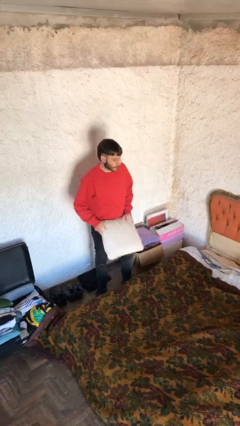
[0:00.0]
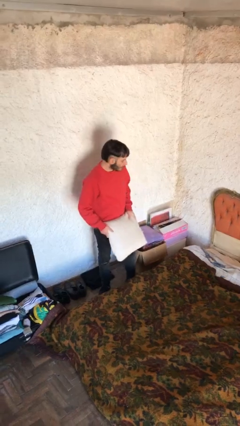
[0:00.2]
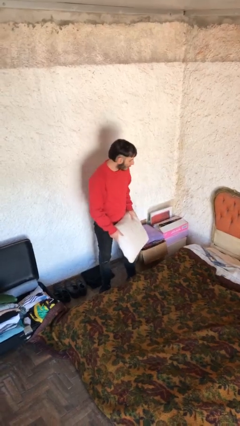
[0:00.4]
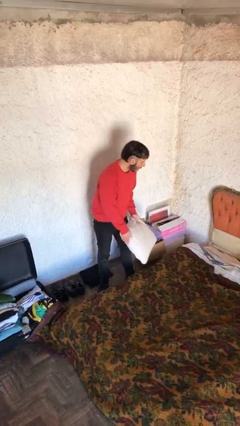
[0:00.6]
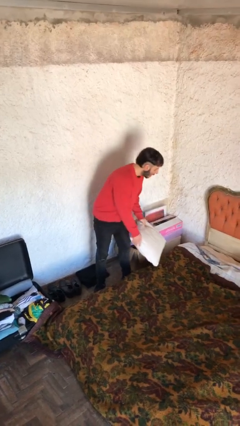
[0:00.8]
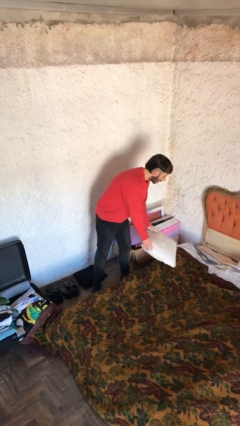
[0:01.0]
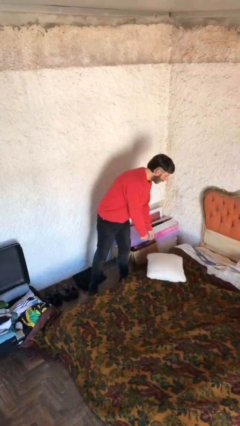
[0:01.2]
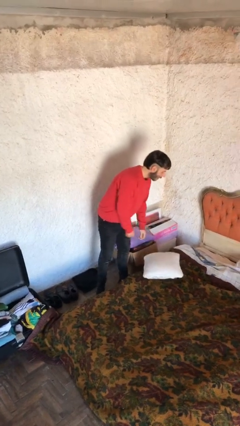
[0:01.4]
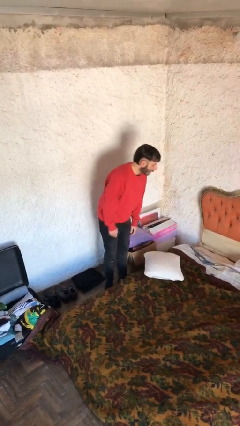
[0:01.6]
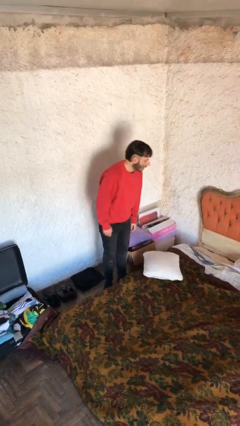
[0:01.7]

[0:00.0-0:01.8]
person puts down object on bed

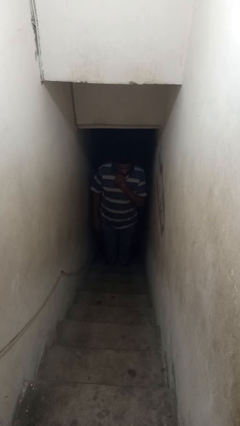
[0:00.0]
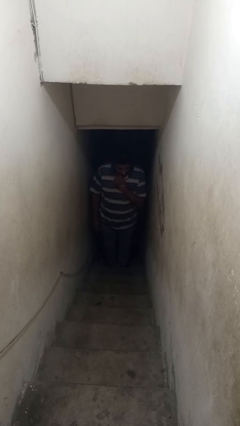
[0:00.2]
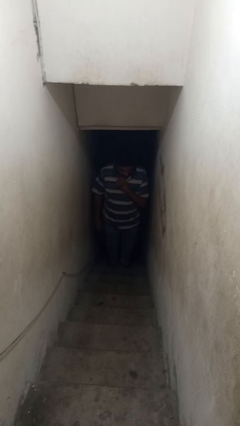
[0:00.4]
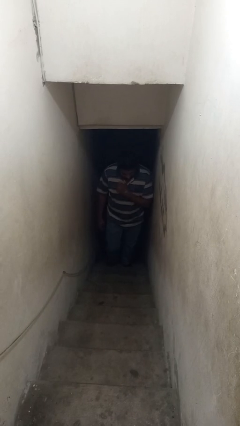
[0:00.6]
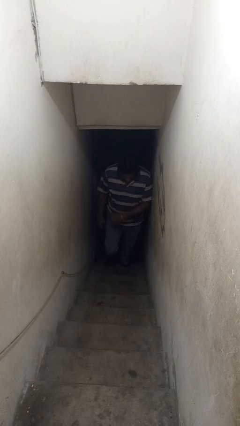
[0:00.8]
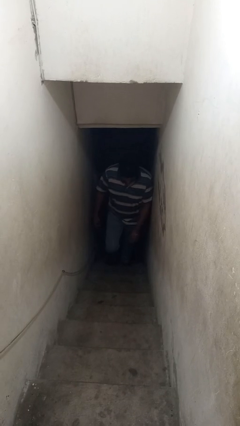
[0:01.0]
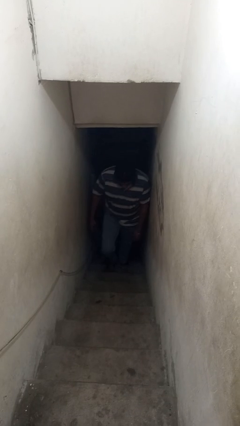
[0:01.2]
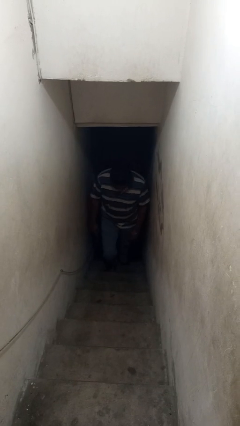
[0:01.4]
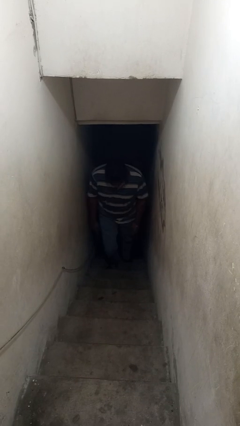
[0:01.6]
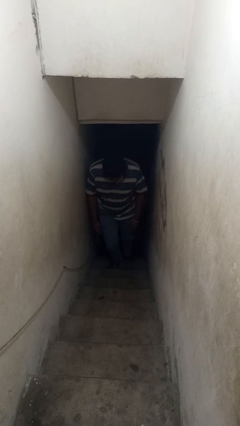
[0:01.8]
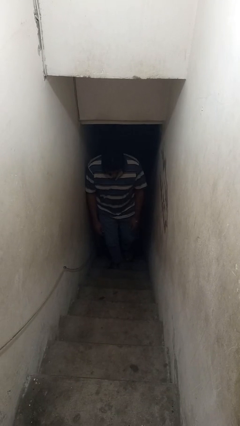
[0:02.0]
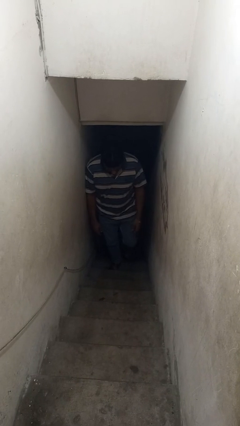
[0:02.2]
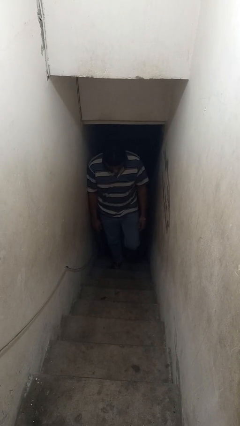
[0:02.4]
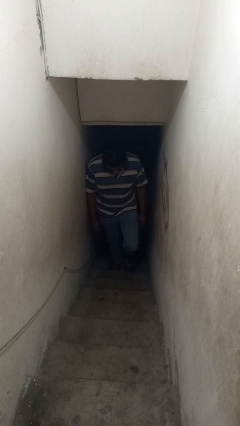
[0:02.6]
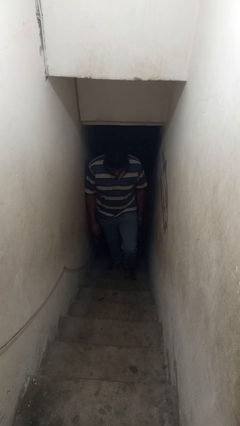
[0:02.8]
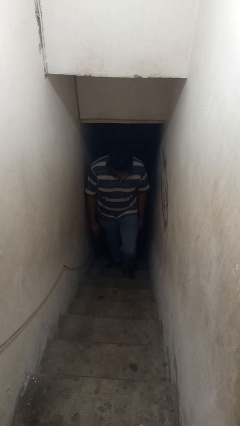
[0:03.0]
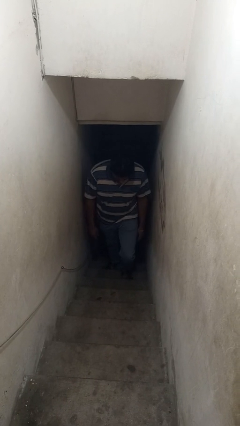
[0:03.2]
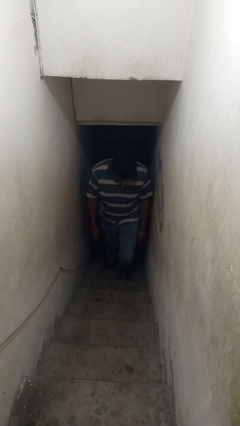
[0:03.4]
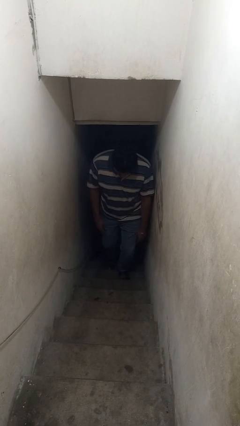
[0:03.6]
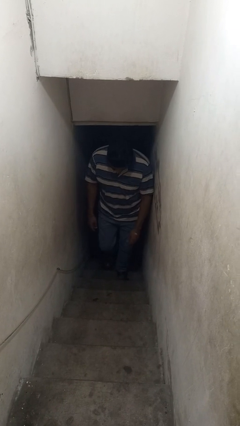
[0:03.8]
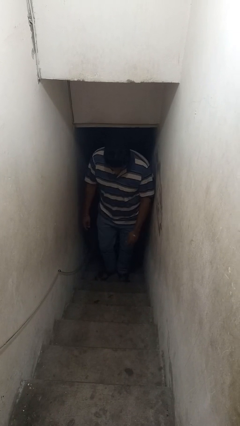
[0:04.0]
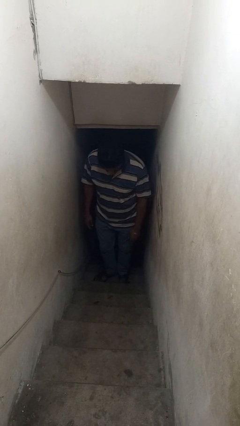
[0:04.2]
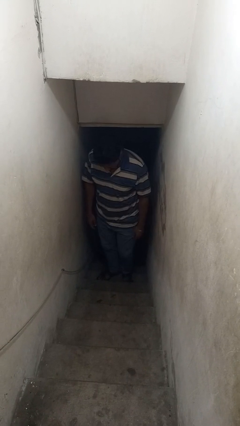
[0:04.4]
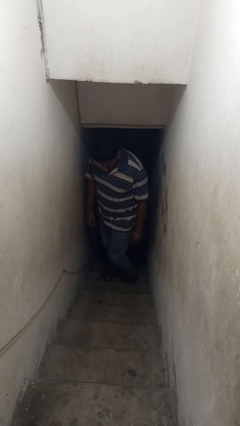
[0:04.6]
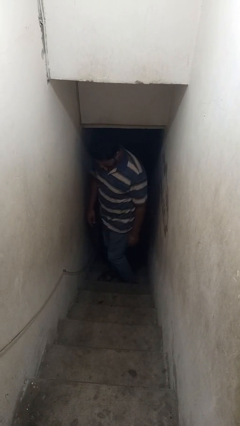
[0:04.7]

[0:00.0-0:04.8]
person climbs up stairs

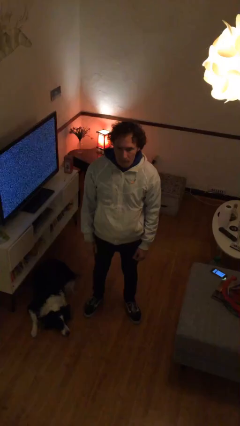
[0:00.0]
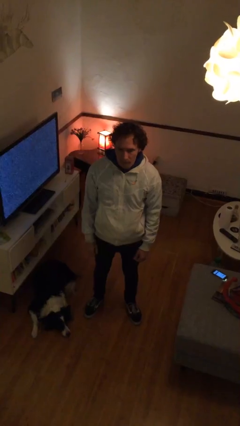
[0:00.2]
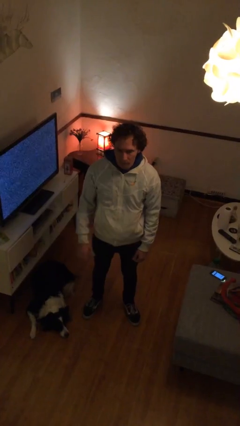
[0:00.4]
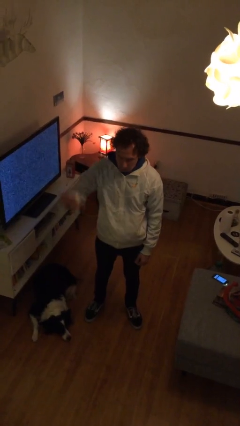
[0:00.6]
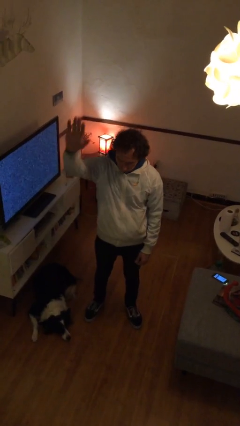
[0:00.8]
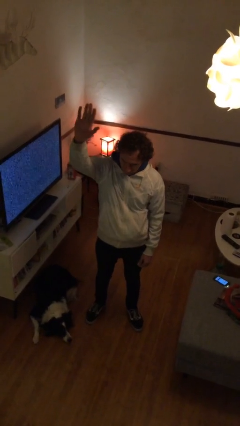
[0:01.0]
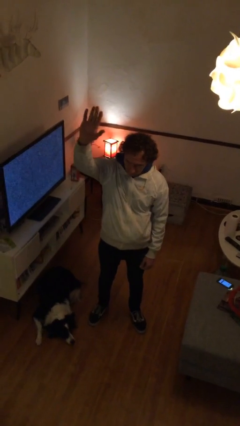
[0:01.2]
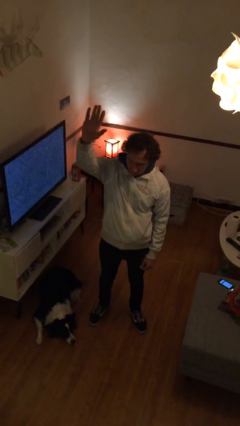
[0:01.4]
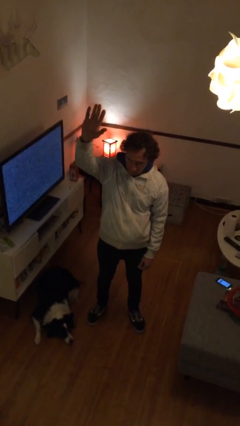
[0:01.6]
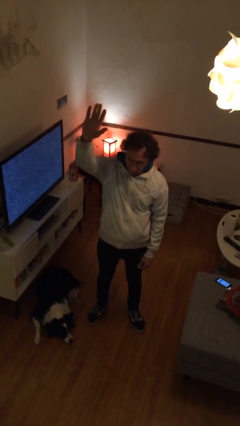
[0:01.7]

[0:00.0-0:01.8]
person gestures raise hand

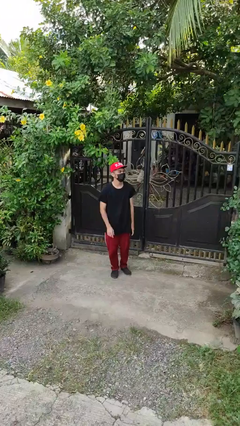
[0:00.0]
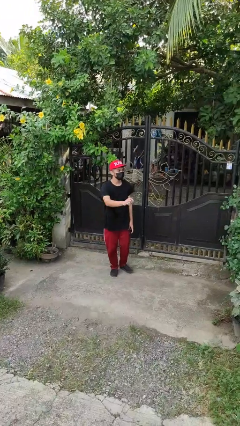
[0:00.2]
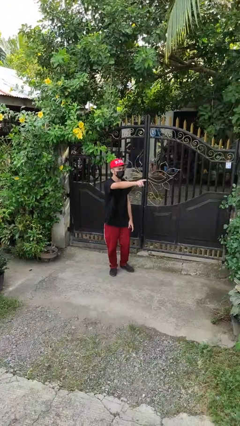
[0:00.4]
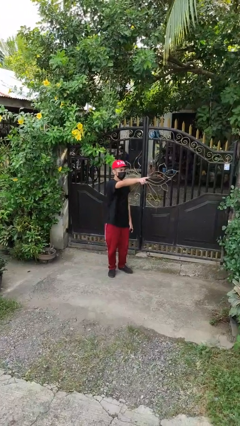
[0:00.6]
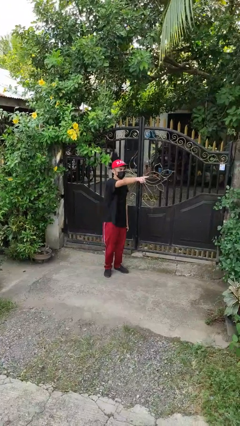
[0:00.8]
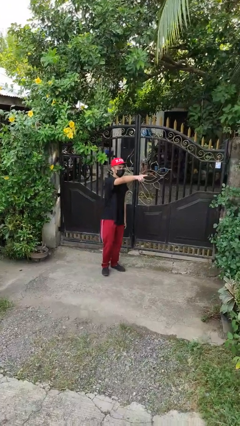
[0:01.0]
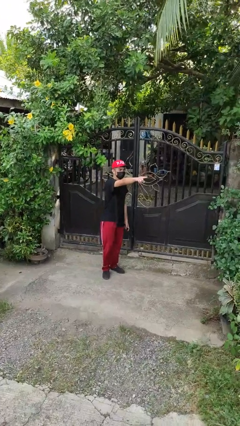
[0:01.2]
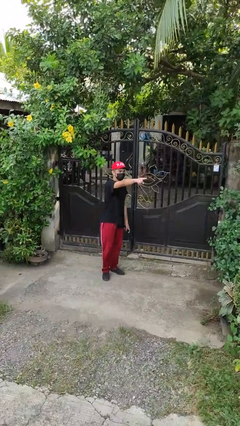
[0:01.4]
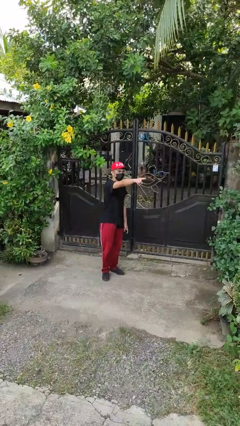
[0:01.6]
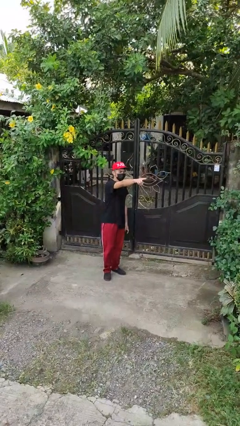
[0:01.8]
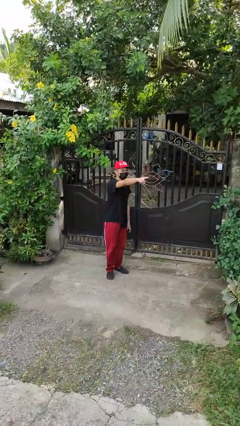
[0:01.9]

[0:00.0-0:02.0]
person points at person

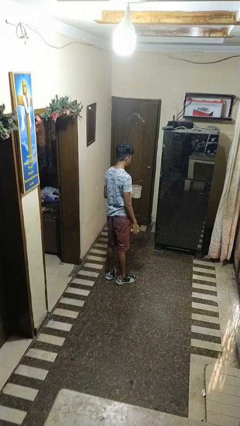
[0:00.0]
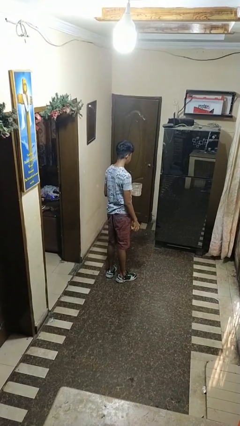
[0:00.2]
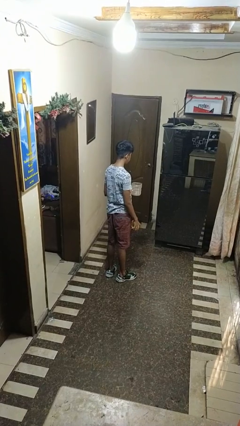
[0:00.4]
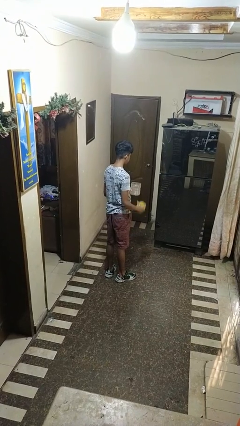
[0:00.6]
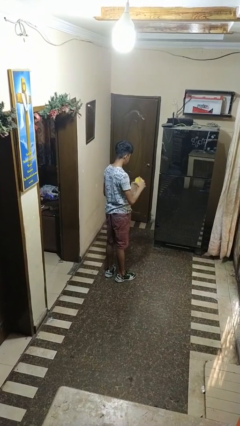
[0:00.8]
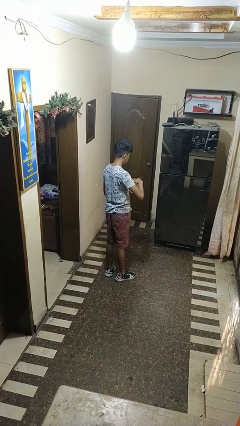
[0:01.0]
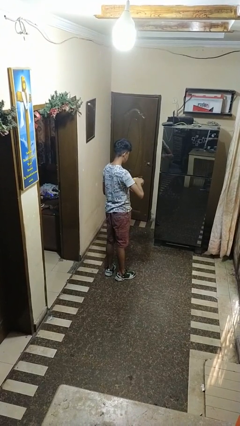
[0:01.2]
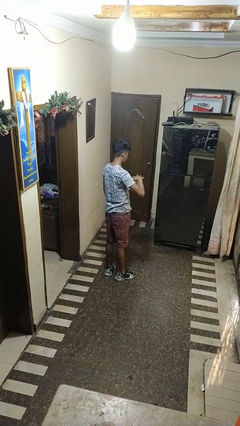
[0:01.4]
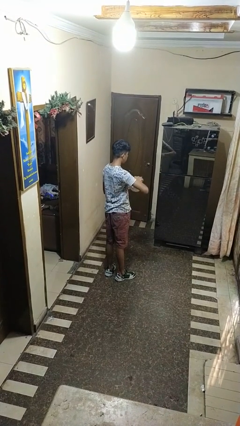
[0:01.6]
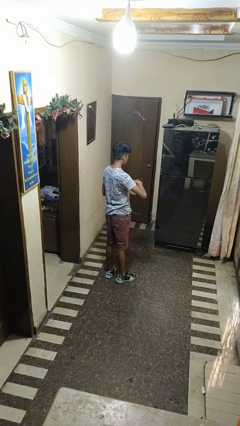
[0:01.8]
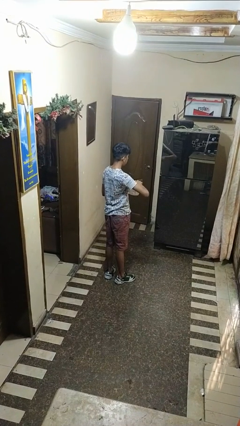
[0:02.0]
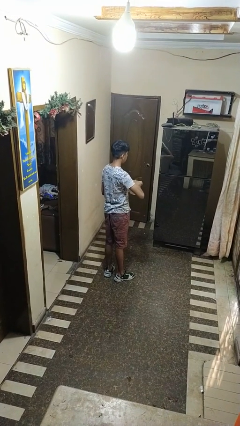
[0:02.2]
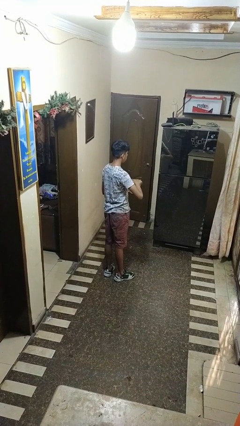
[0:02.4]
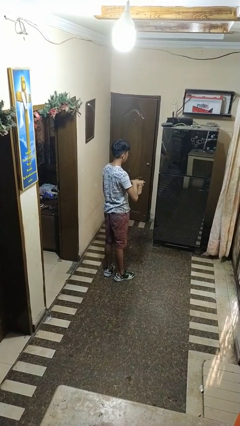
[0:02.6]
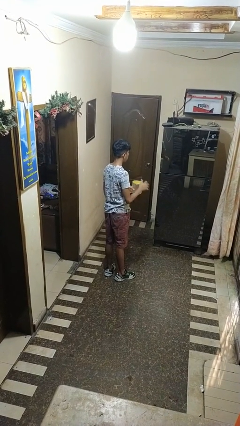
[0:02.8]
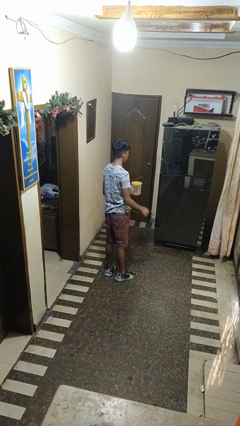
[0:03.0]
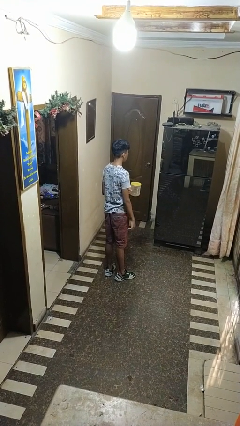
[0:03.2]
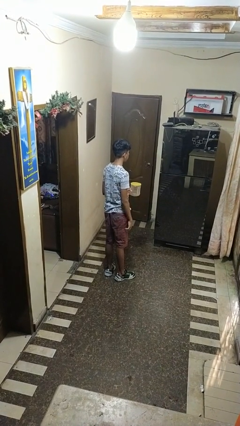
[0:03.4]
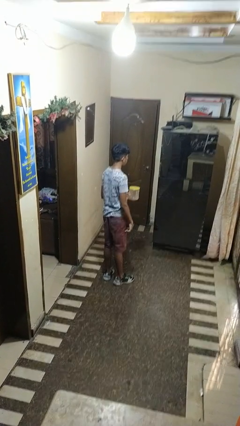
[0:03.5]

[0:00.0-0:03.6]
person closes jar

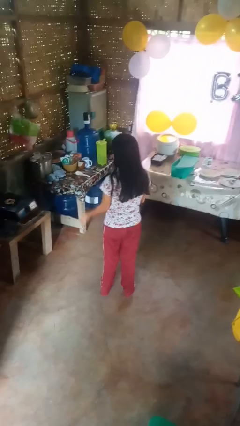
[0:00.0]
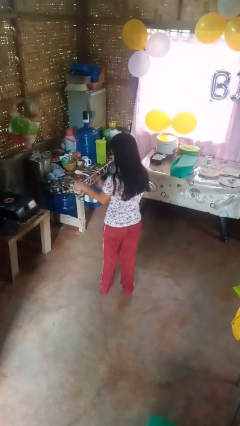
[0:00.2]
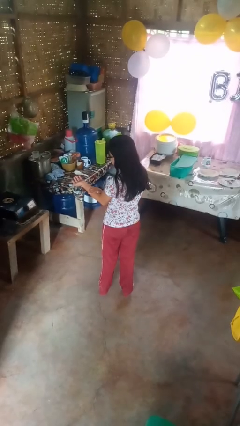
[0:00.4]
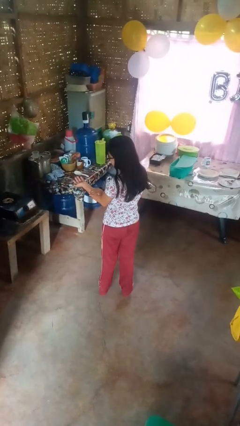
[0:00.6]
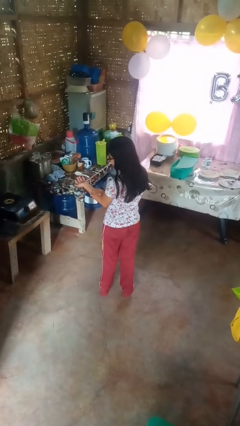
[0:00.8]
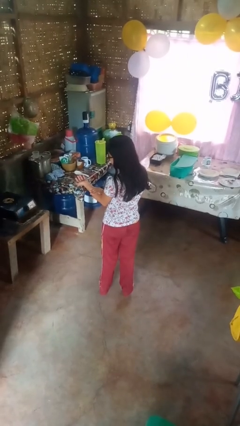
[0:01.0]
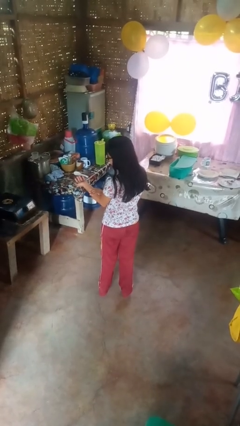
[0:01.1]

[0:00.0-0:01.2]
person swats bug

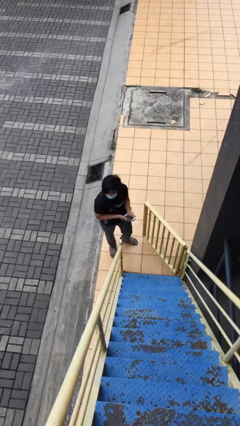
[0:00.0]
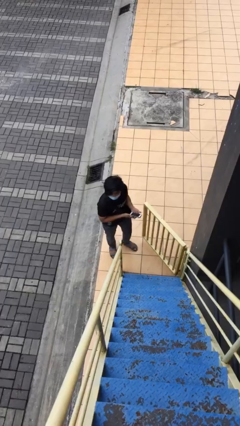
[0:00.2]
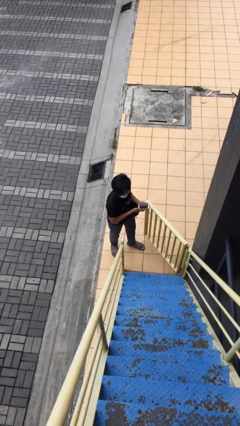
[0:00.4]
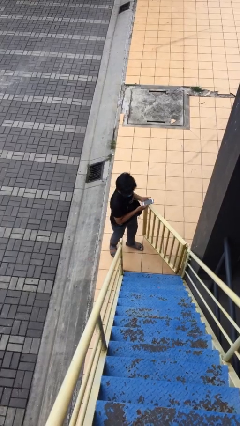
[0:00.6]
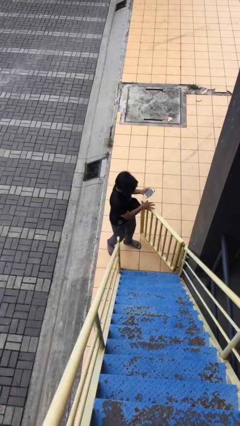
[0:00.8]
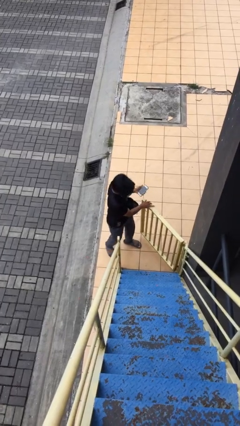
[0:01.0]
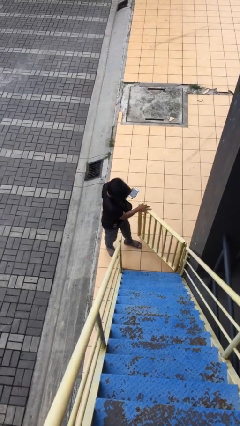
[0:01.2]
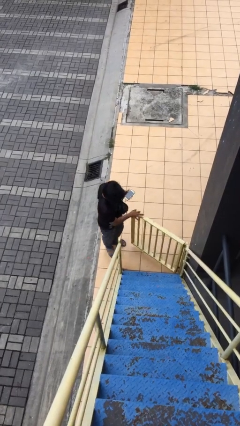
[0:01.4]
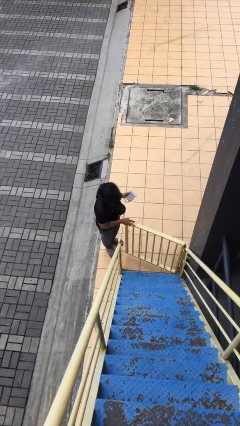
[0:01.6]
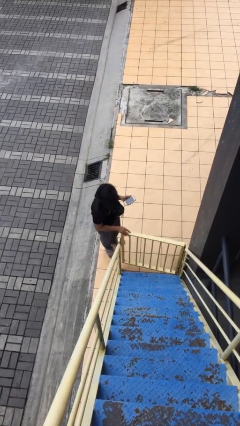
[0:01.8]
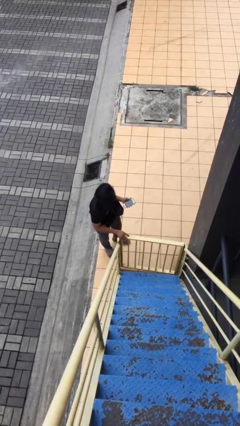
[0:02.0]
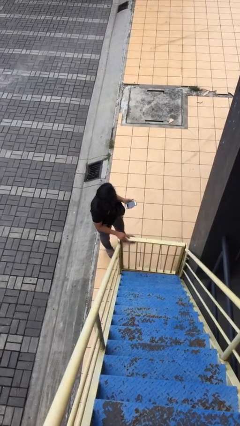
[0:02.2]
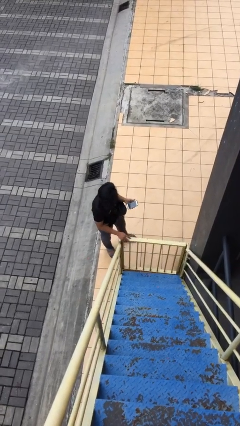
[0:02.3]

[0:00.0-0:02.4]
person closes facility door
